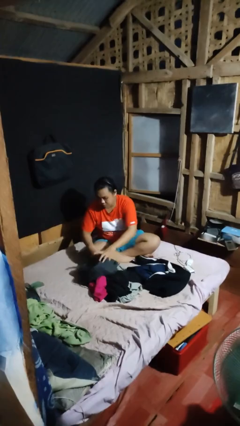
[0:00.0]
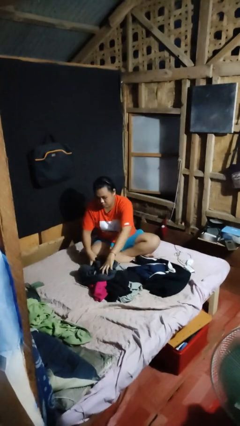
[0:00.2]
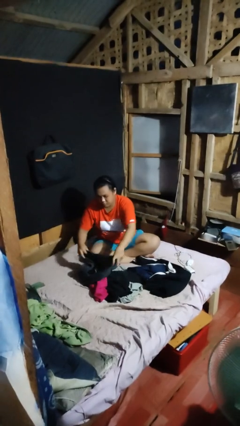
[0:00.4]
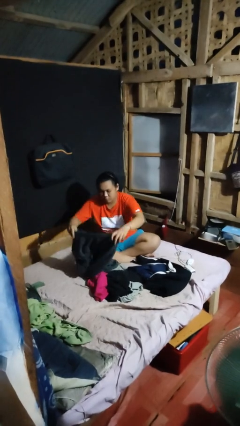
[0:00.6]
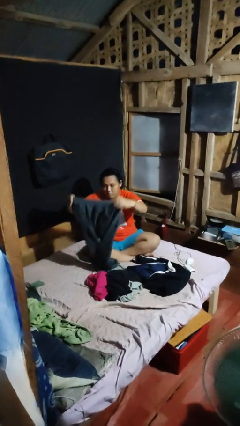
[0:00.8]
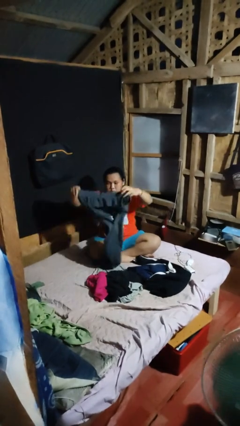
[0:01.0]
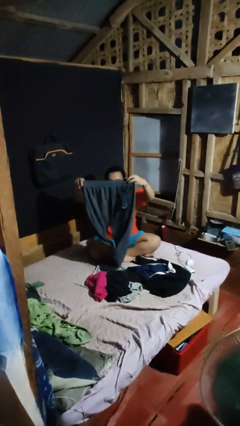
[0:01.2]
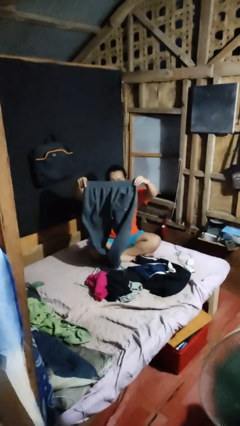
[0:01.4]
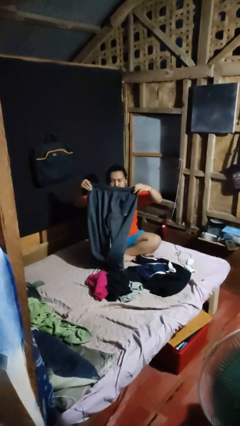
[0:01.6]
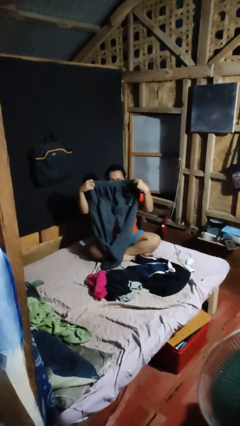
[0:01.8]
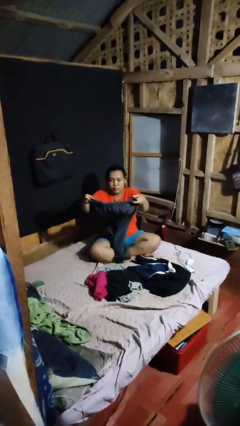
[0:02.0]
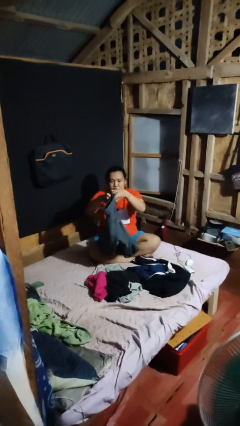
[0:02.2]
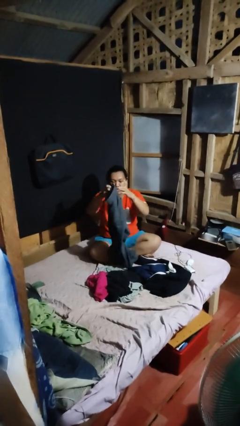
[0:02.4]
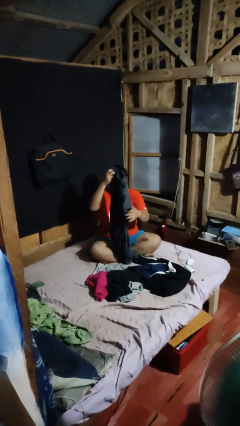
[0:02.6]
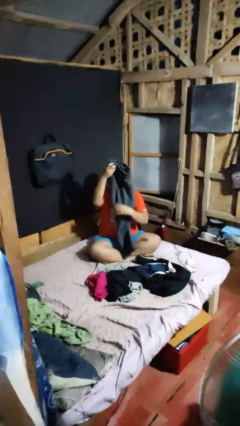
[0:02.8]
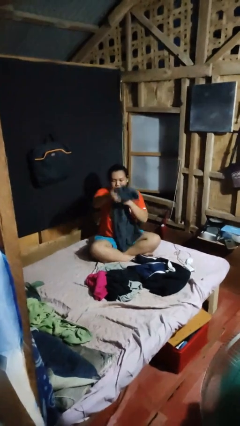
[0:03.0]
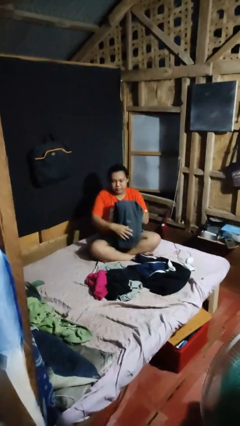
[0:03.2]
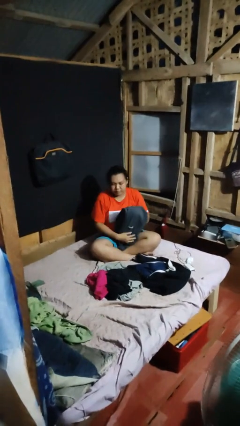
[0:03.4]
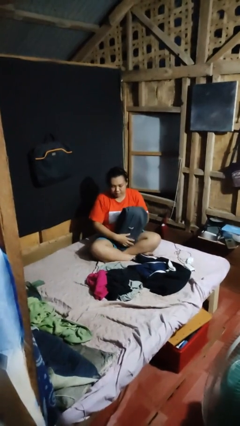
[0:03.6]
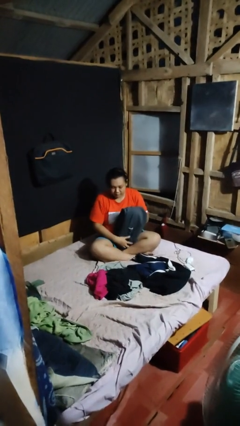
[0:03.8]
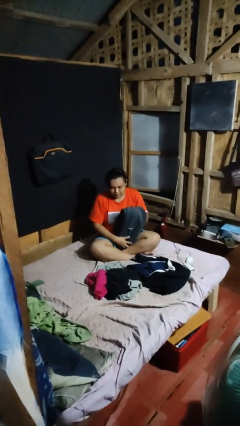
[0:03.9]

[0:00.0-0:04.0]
person folds pants

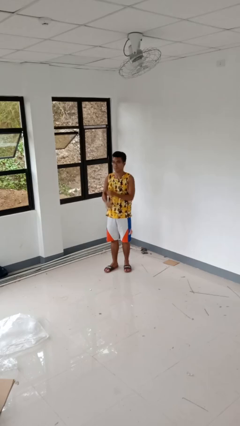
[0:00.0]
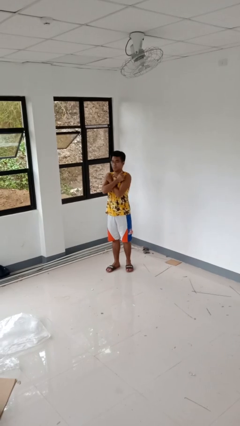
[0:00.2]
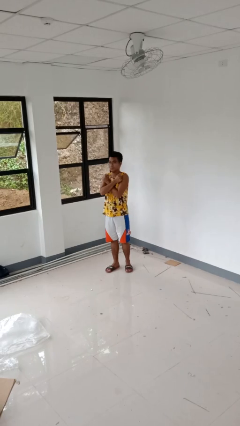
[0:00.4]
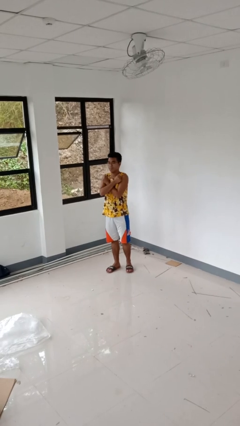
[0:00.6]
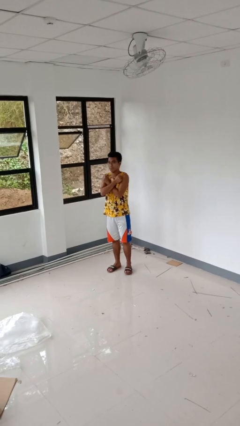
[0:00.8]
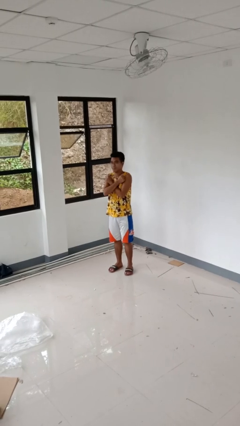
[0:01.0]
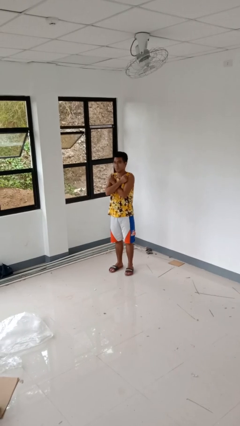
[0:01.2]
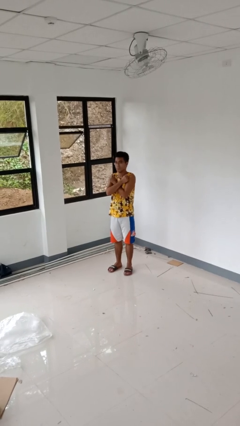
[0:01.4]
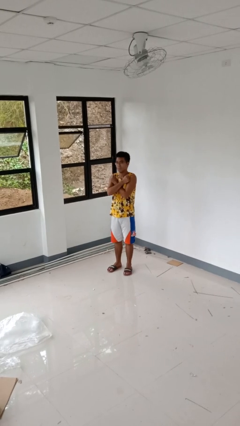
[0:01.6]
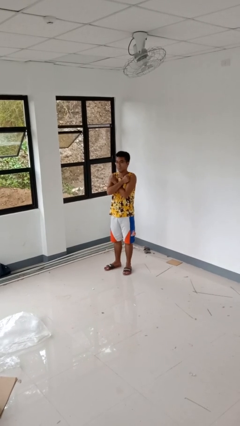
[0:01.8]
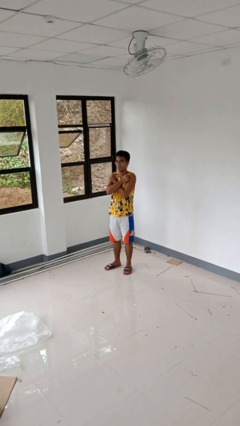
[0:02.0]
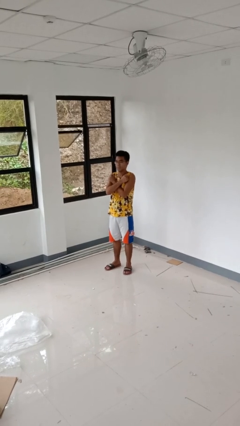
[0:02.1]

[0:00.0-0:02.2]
person gestures arms x

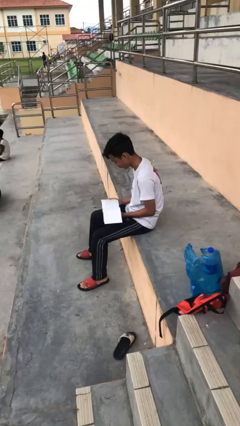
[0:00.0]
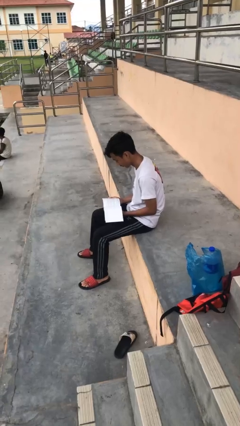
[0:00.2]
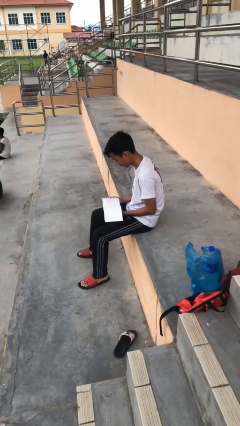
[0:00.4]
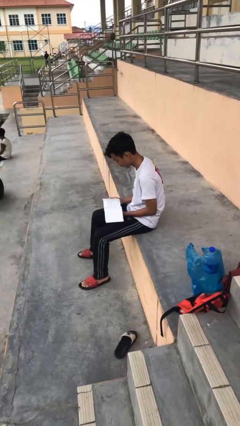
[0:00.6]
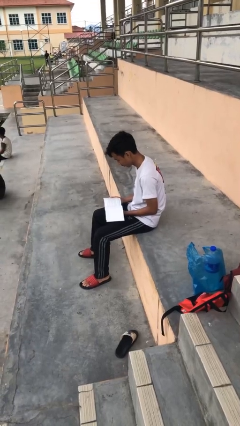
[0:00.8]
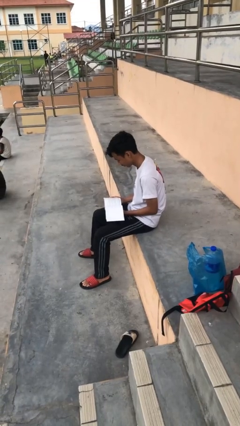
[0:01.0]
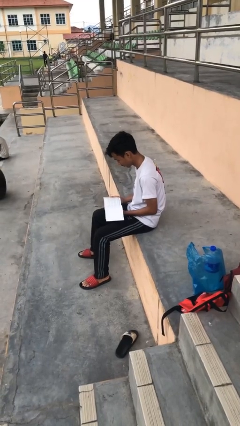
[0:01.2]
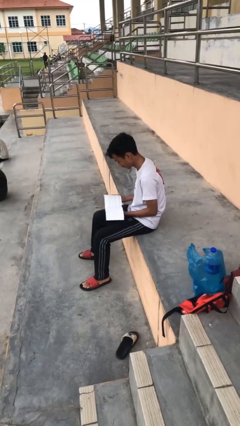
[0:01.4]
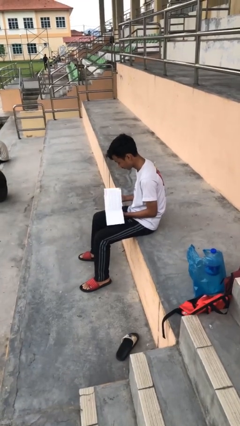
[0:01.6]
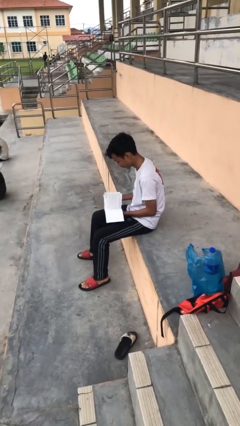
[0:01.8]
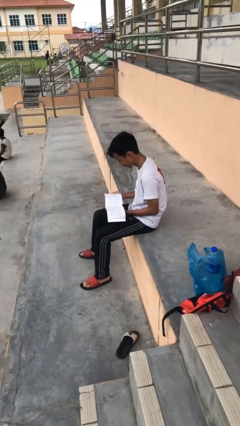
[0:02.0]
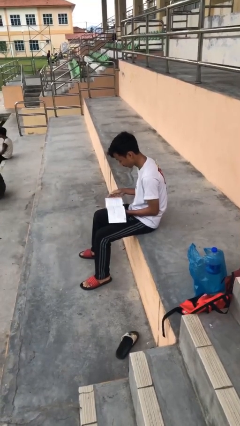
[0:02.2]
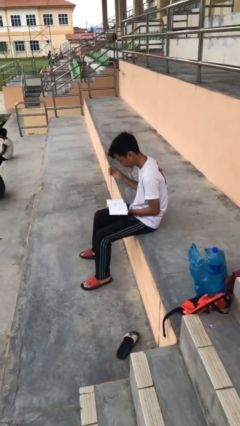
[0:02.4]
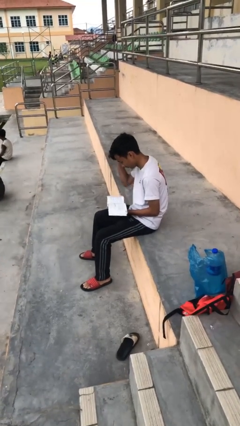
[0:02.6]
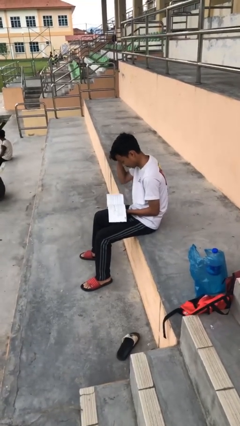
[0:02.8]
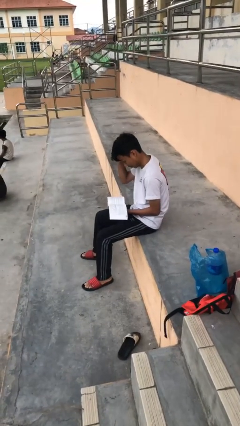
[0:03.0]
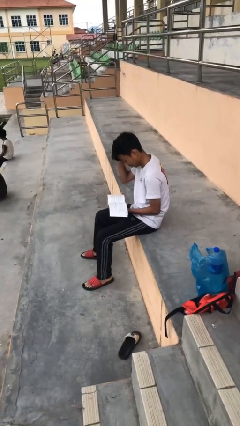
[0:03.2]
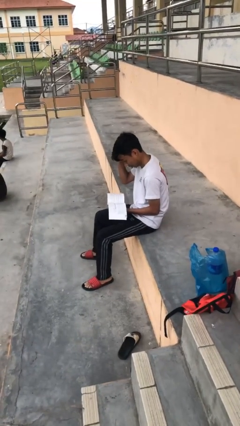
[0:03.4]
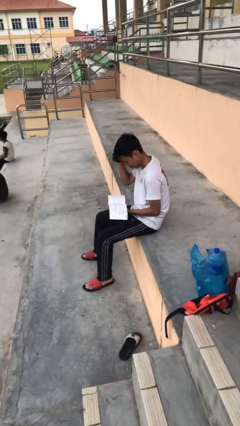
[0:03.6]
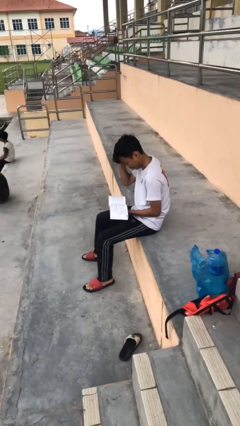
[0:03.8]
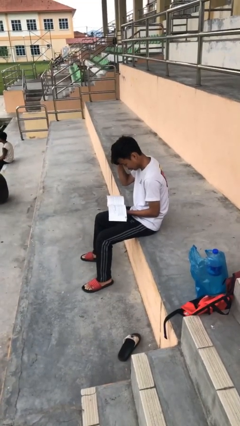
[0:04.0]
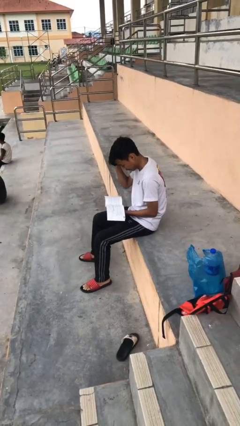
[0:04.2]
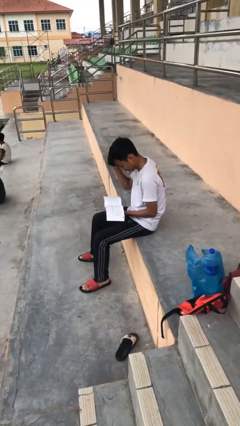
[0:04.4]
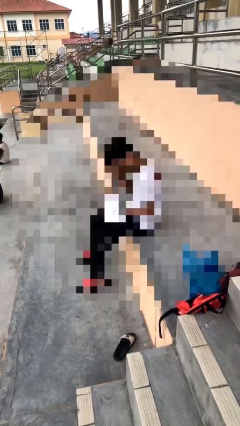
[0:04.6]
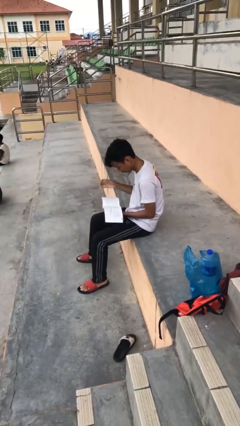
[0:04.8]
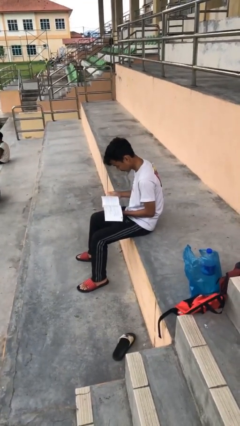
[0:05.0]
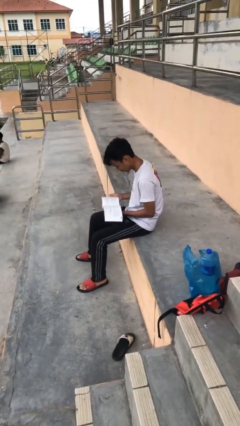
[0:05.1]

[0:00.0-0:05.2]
person reads document

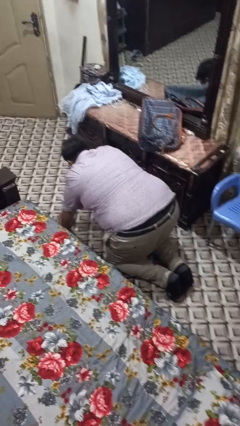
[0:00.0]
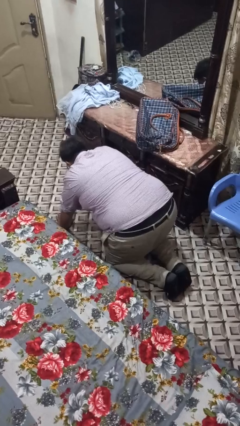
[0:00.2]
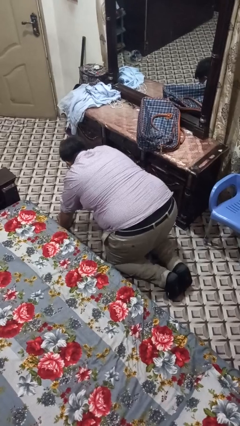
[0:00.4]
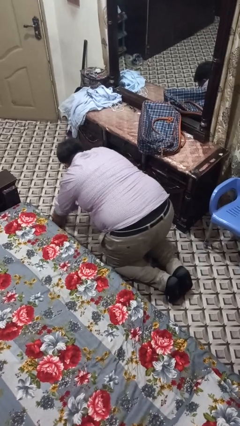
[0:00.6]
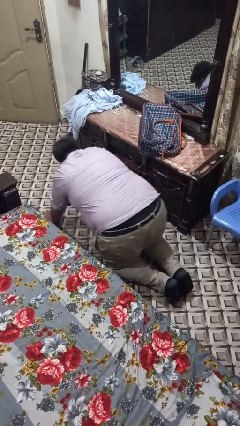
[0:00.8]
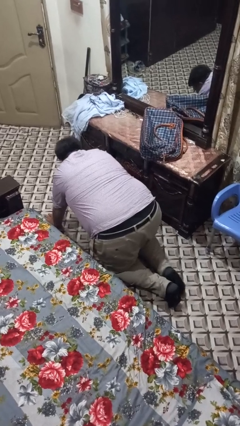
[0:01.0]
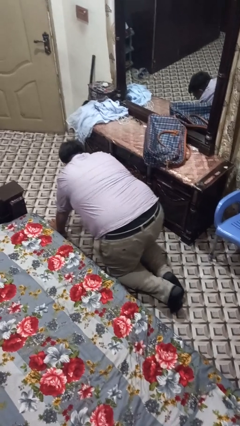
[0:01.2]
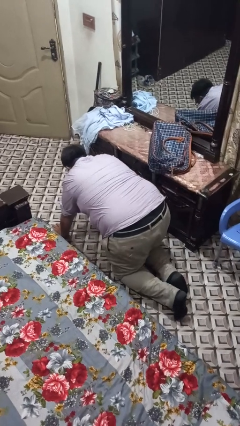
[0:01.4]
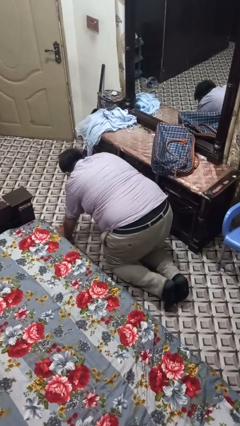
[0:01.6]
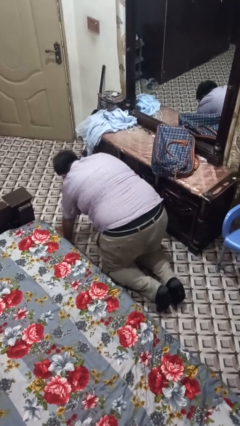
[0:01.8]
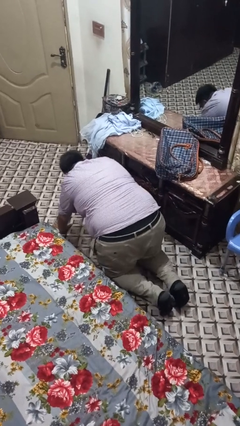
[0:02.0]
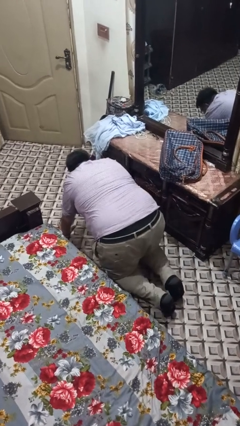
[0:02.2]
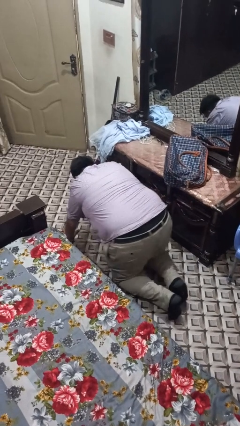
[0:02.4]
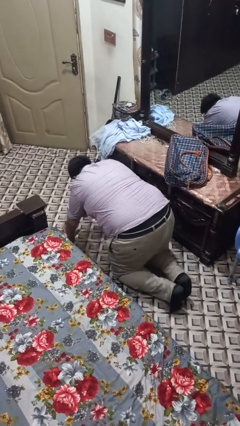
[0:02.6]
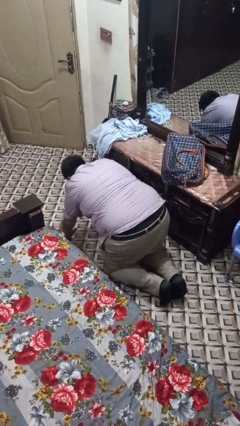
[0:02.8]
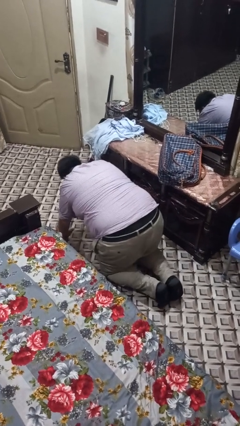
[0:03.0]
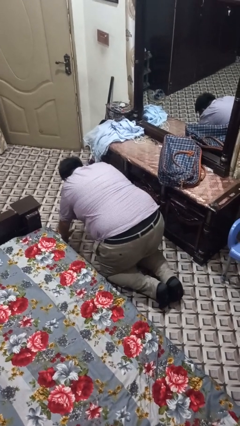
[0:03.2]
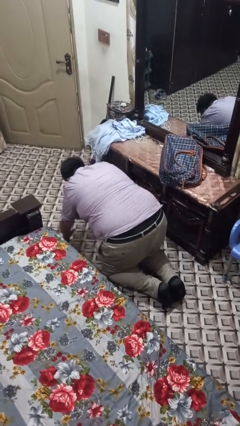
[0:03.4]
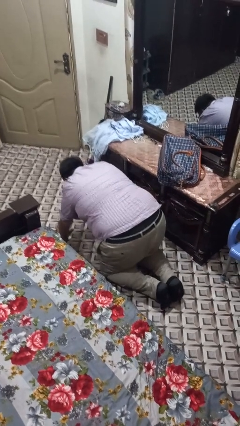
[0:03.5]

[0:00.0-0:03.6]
person crawls

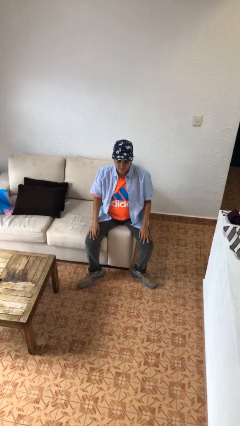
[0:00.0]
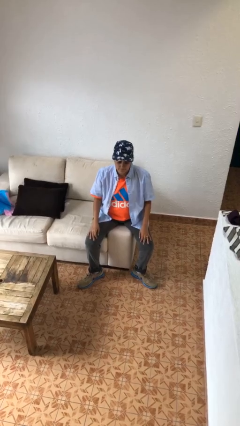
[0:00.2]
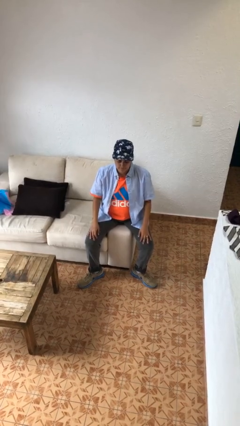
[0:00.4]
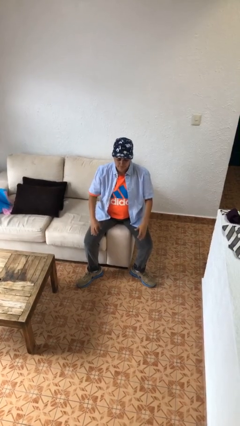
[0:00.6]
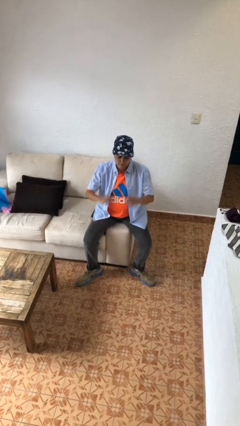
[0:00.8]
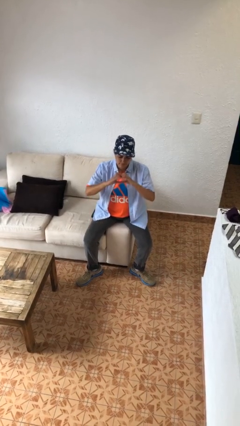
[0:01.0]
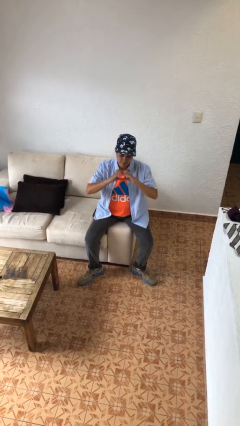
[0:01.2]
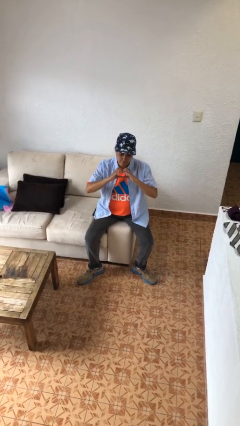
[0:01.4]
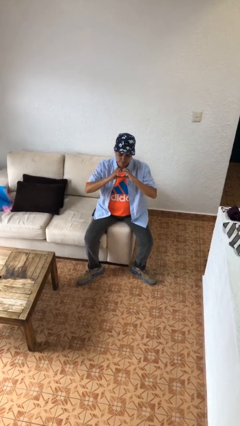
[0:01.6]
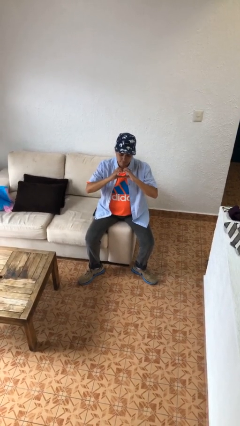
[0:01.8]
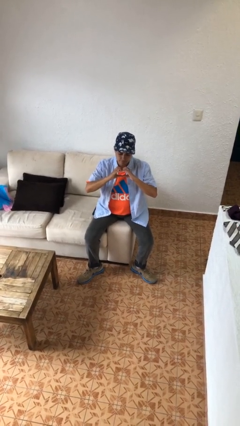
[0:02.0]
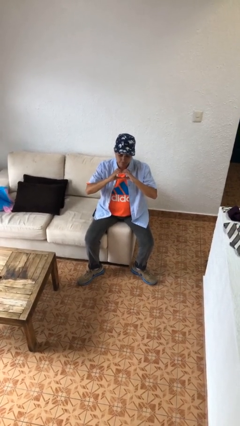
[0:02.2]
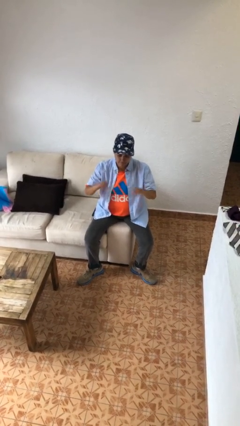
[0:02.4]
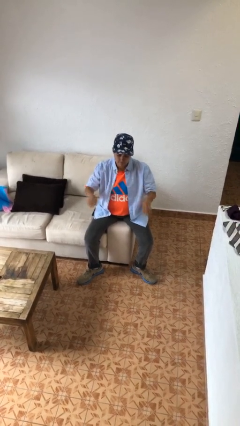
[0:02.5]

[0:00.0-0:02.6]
person gestures heart
